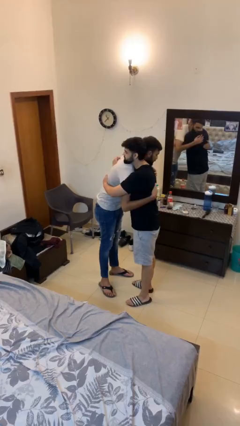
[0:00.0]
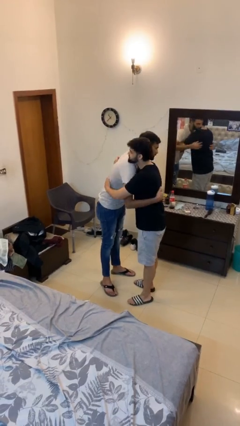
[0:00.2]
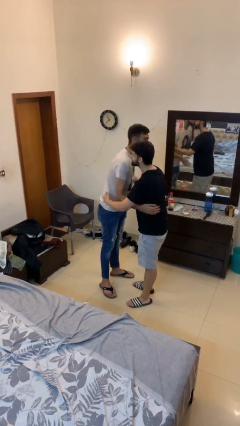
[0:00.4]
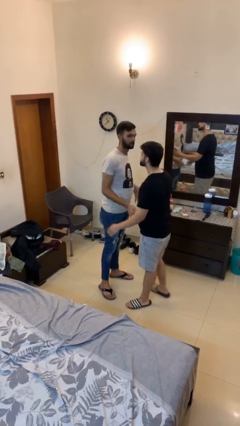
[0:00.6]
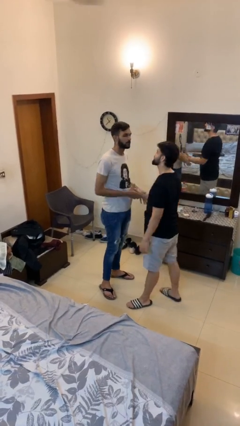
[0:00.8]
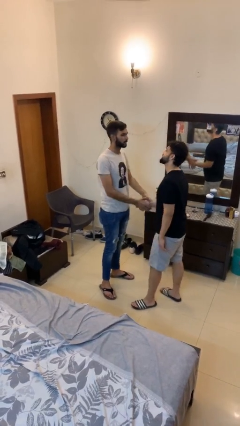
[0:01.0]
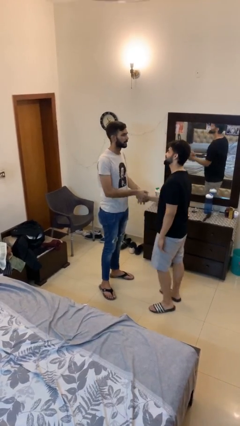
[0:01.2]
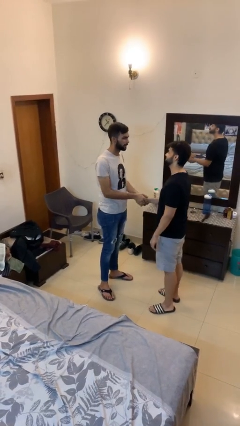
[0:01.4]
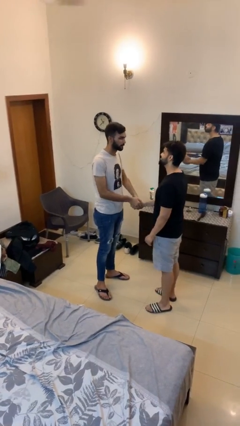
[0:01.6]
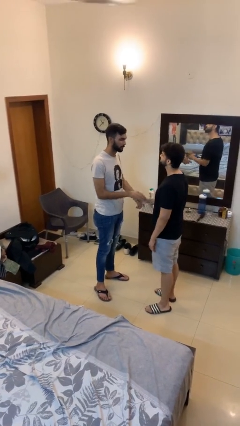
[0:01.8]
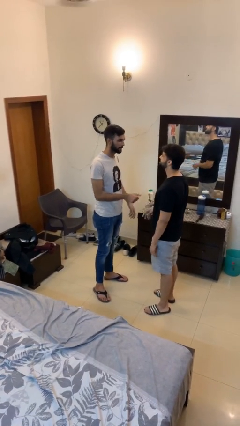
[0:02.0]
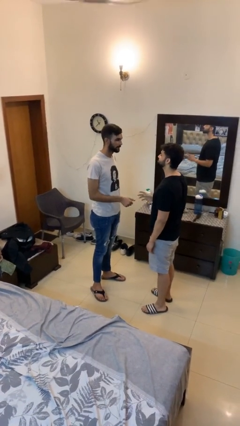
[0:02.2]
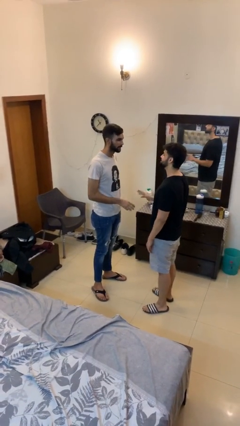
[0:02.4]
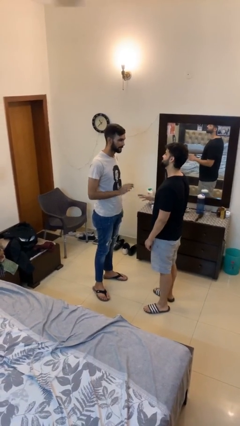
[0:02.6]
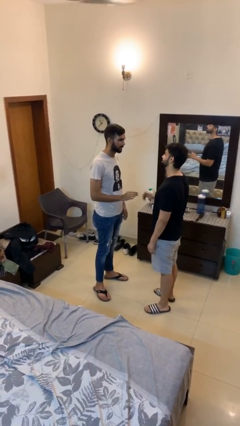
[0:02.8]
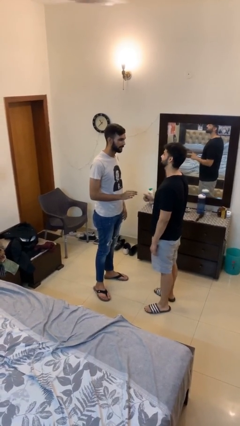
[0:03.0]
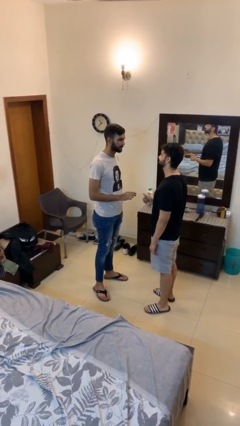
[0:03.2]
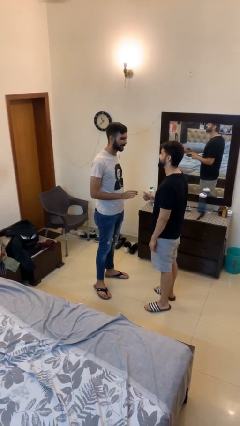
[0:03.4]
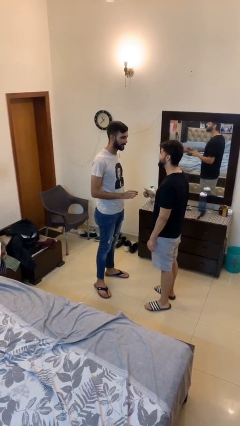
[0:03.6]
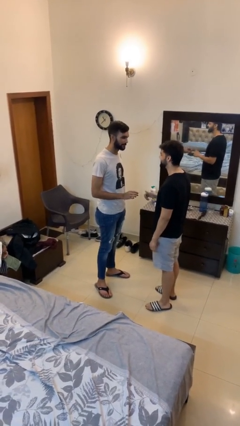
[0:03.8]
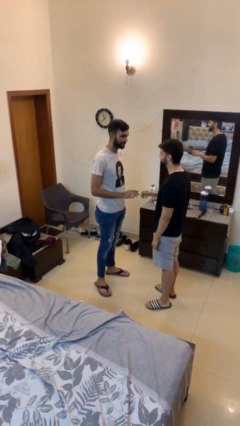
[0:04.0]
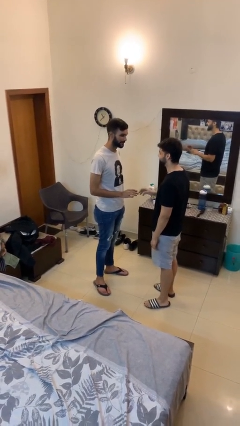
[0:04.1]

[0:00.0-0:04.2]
person talks to person

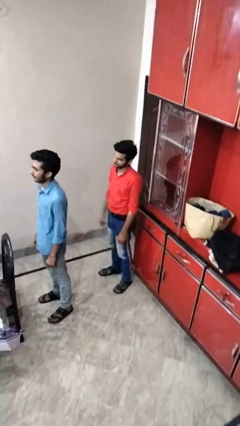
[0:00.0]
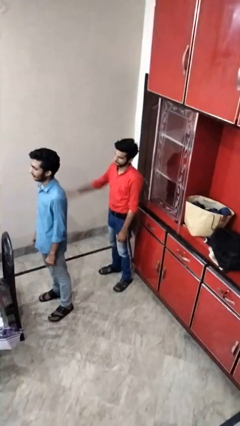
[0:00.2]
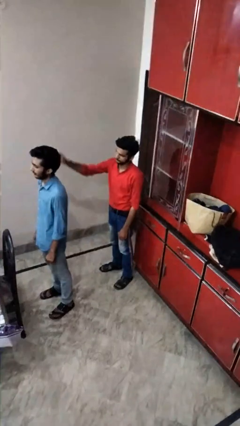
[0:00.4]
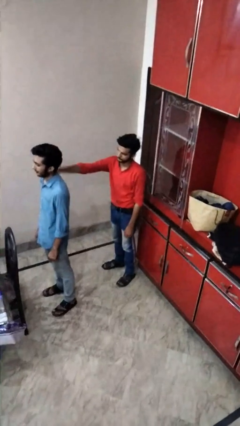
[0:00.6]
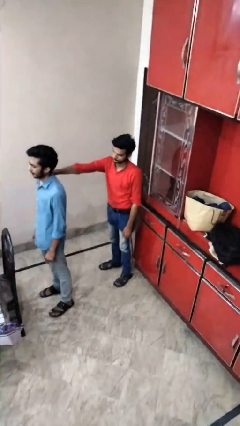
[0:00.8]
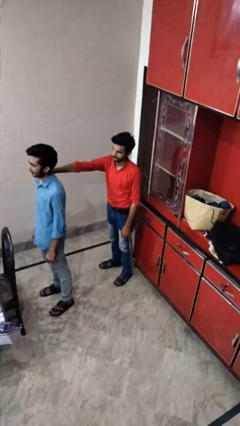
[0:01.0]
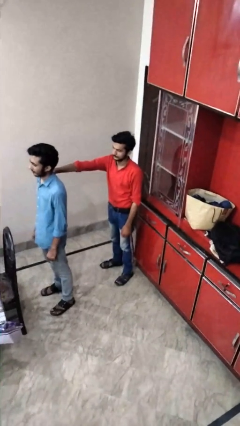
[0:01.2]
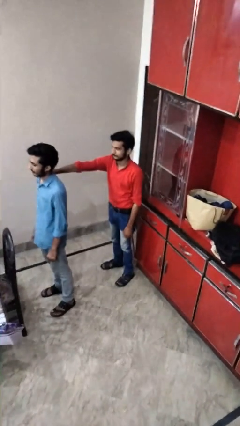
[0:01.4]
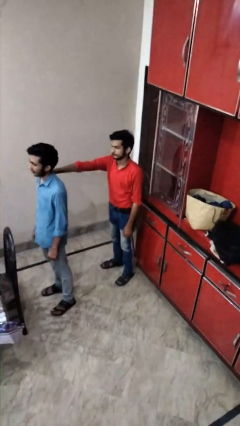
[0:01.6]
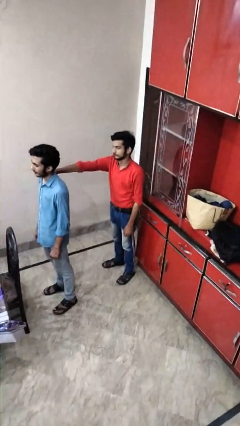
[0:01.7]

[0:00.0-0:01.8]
person grabs person by shoulder

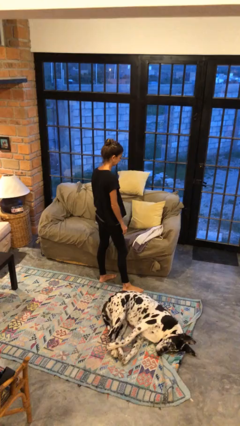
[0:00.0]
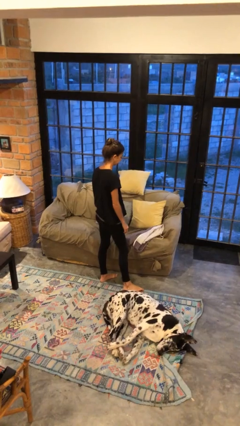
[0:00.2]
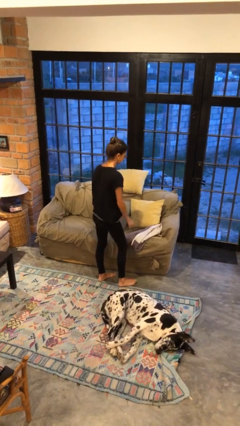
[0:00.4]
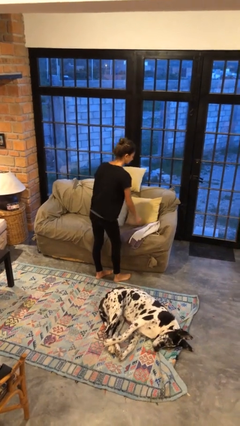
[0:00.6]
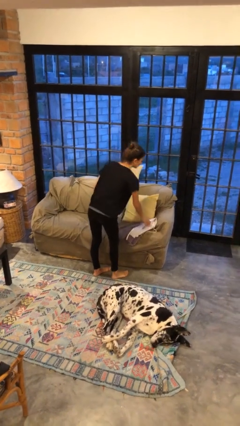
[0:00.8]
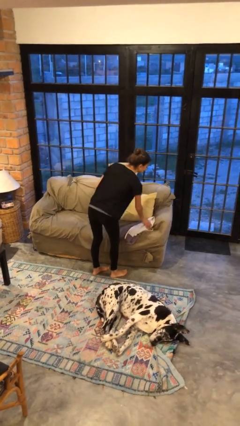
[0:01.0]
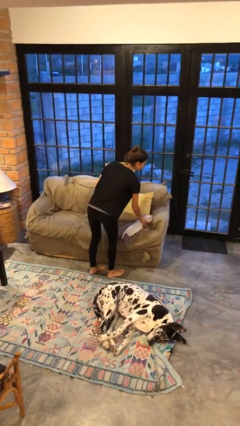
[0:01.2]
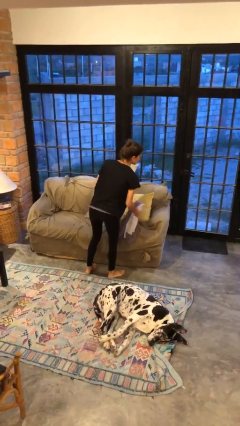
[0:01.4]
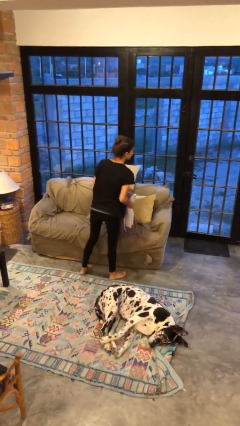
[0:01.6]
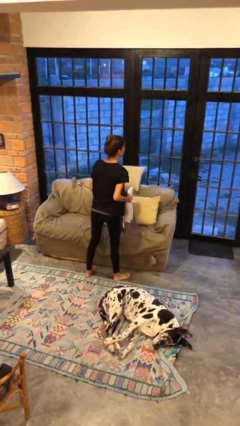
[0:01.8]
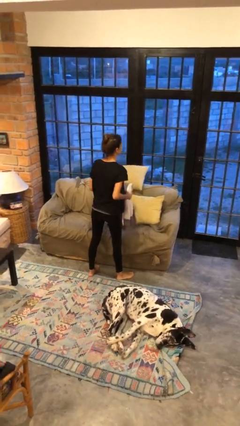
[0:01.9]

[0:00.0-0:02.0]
person picks up object from couch

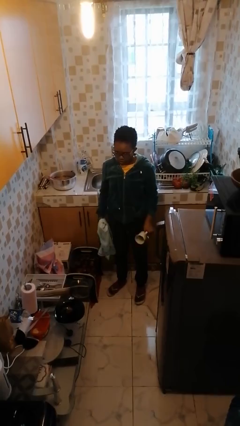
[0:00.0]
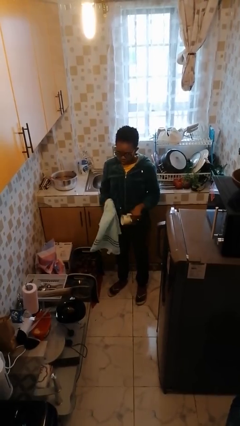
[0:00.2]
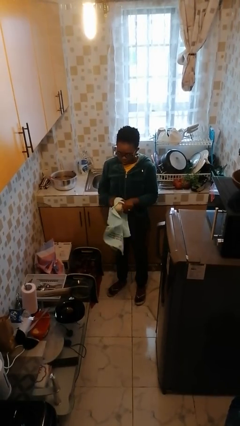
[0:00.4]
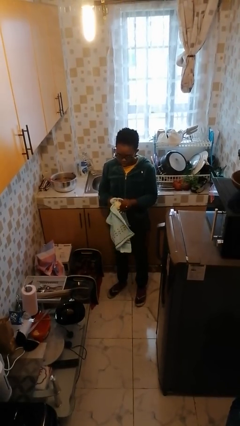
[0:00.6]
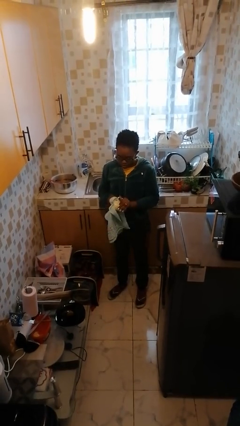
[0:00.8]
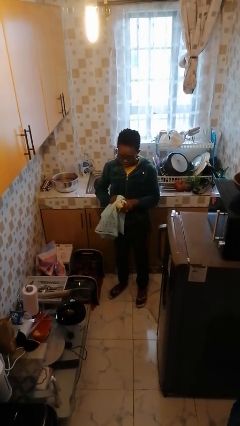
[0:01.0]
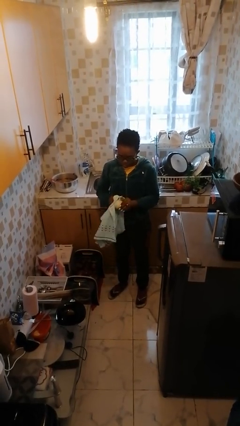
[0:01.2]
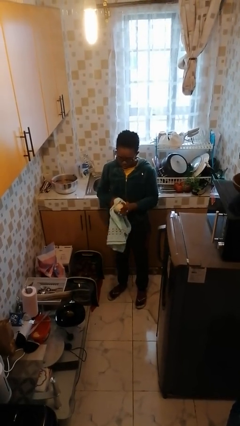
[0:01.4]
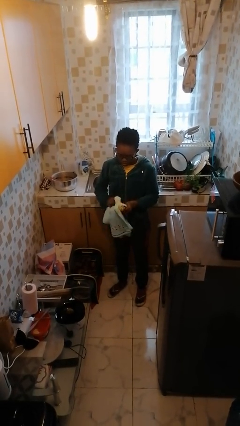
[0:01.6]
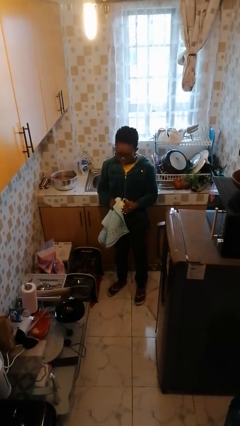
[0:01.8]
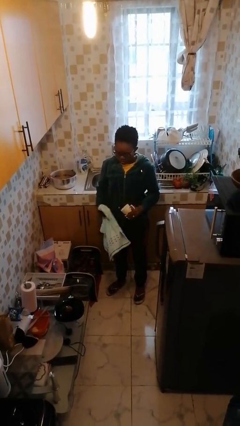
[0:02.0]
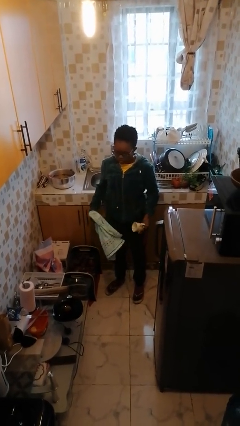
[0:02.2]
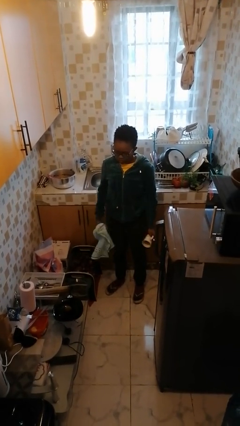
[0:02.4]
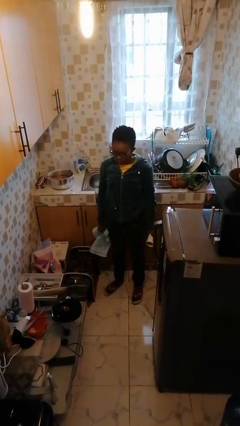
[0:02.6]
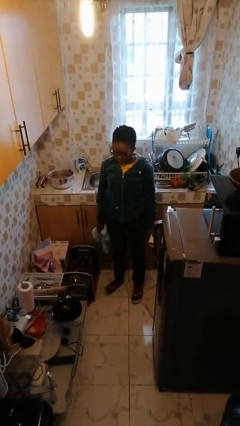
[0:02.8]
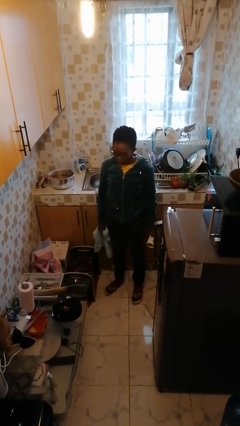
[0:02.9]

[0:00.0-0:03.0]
person dries dish

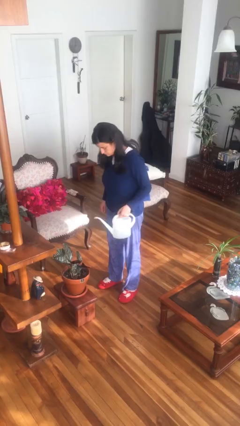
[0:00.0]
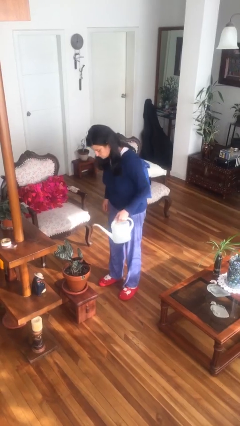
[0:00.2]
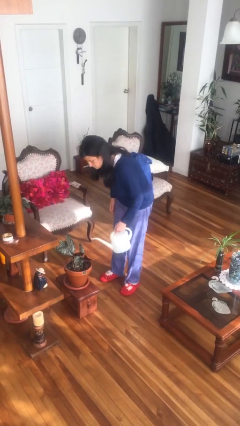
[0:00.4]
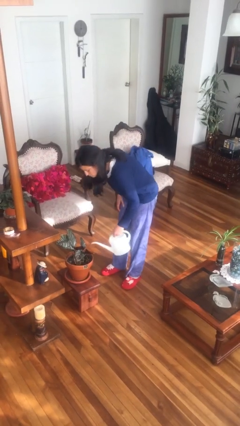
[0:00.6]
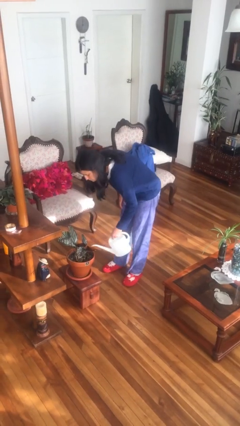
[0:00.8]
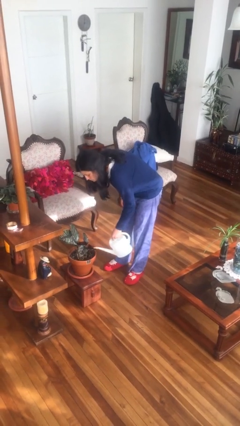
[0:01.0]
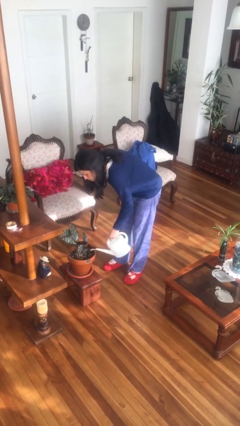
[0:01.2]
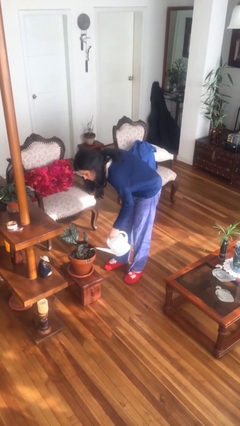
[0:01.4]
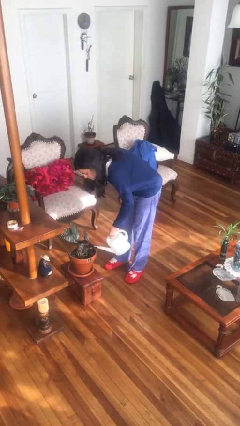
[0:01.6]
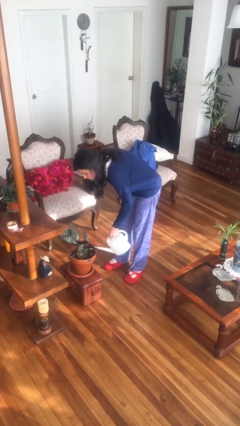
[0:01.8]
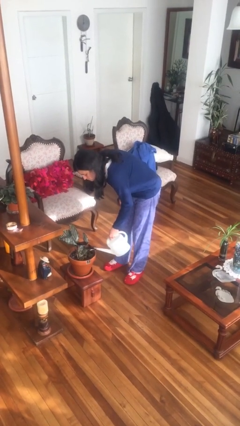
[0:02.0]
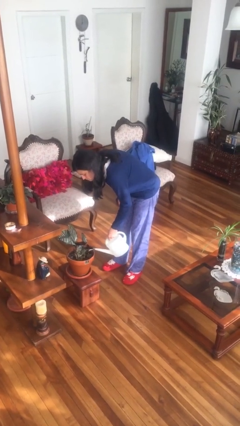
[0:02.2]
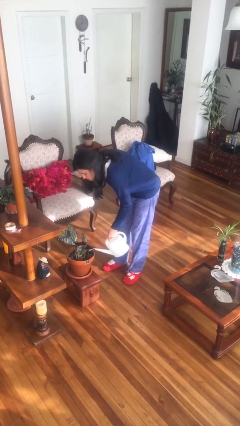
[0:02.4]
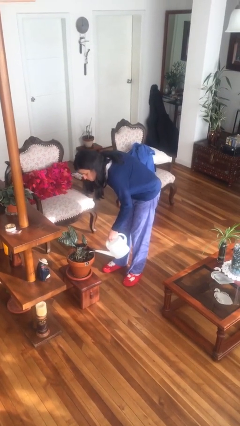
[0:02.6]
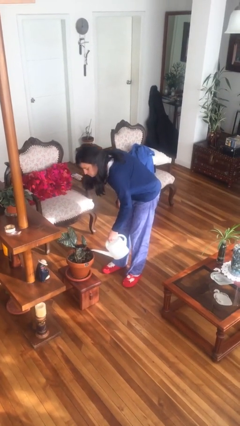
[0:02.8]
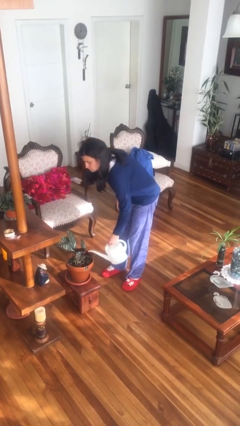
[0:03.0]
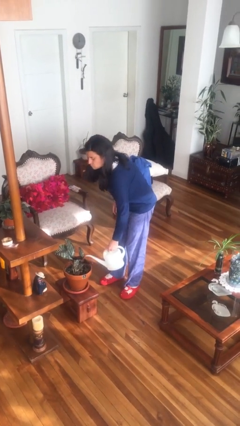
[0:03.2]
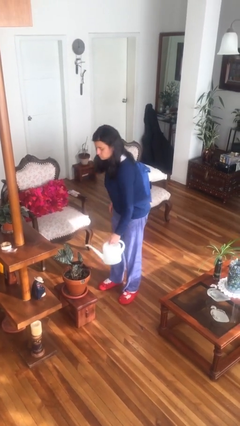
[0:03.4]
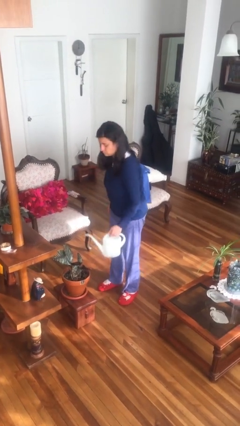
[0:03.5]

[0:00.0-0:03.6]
person waters houseplant

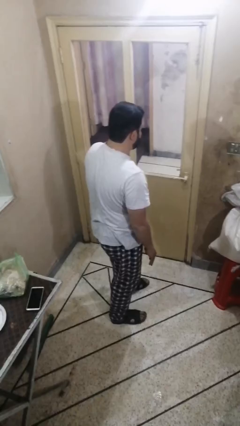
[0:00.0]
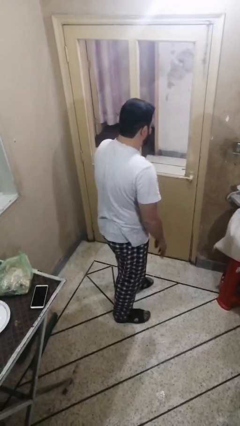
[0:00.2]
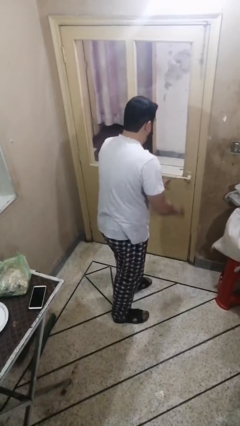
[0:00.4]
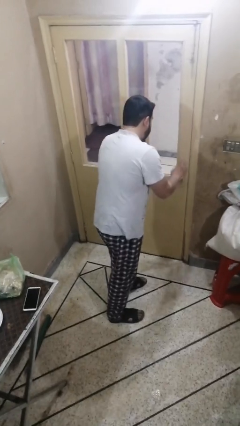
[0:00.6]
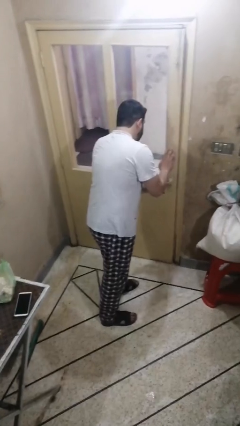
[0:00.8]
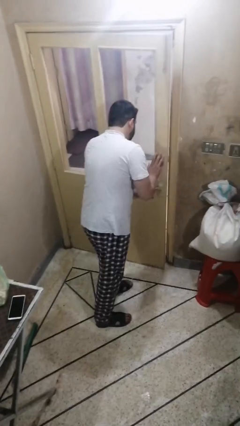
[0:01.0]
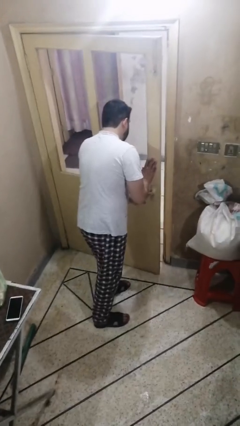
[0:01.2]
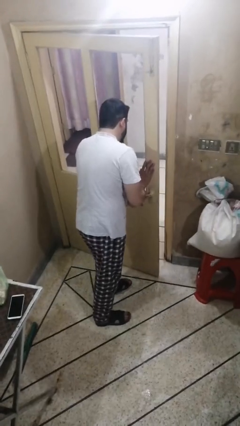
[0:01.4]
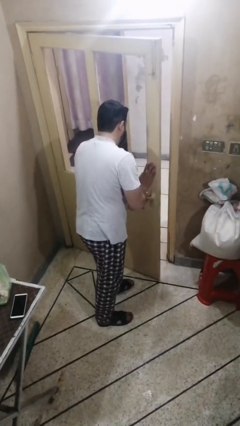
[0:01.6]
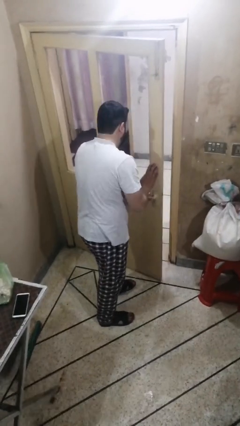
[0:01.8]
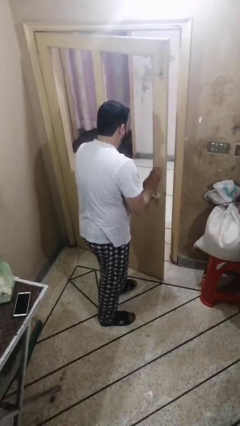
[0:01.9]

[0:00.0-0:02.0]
person opens facility door

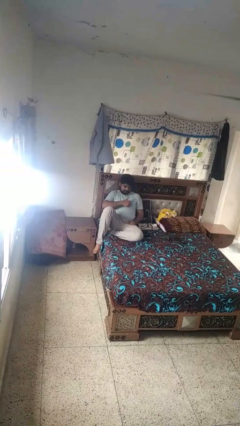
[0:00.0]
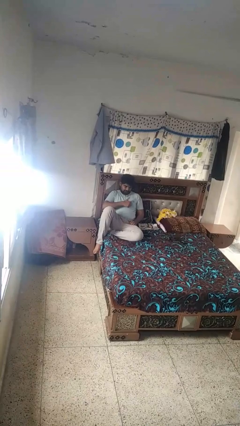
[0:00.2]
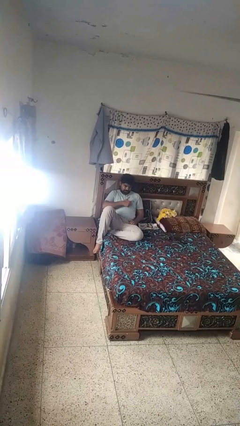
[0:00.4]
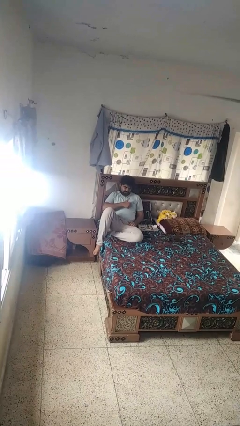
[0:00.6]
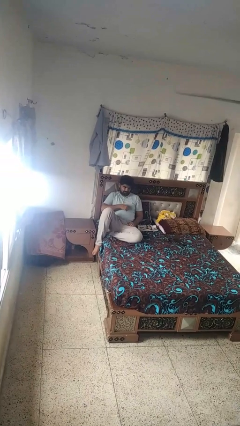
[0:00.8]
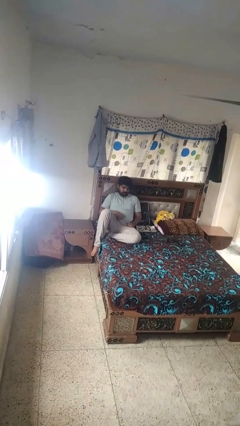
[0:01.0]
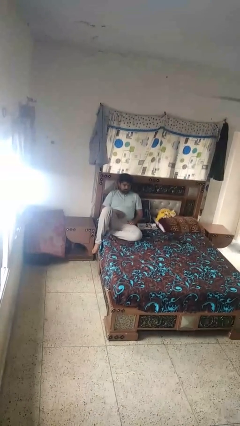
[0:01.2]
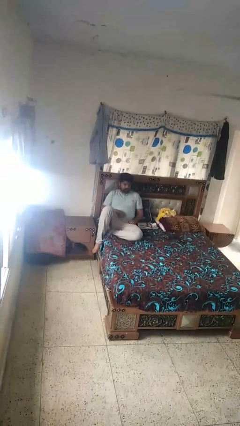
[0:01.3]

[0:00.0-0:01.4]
person gestures thumbs up
